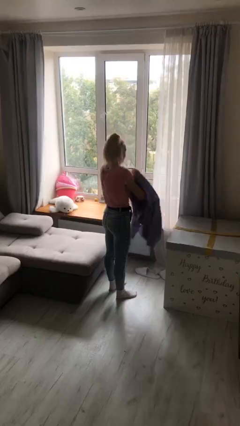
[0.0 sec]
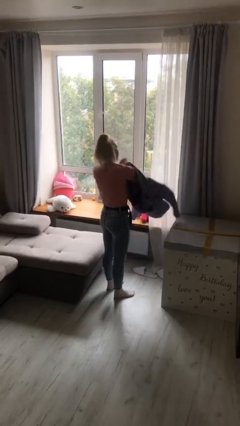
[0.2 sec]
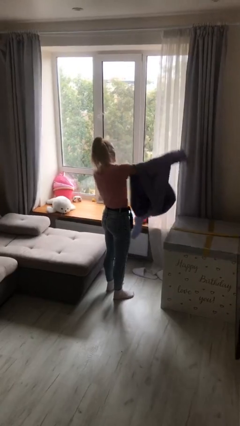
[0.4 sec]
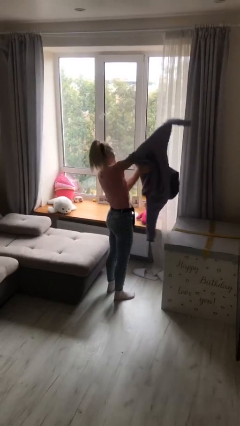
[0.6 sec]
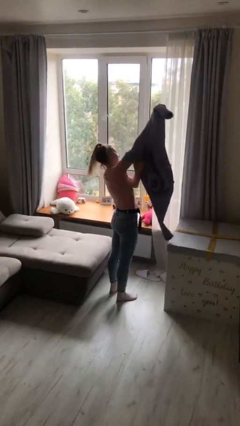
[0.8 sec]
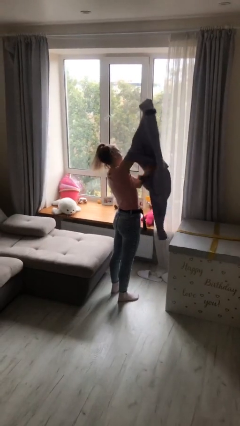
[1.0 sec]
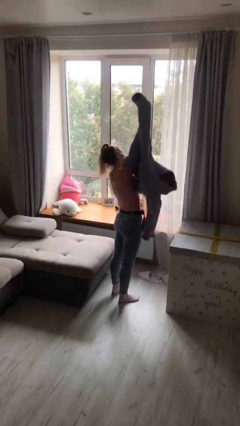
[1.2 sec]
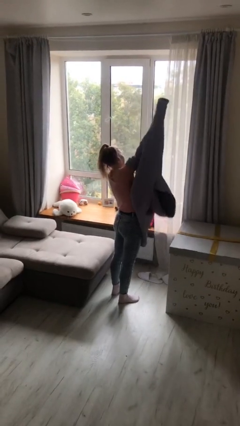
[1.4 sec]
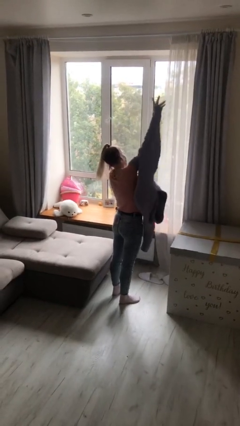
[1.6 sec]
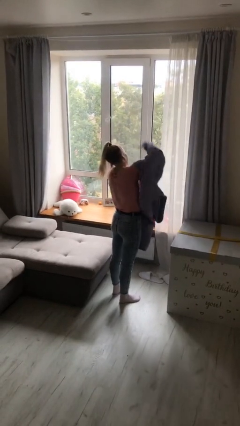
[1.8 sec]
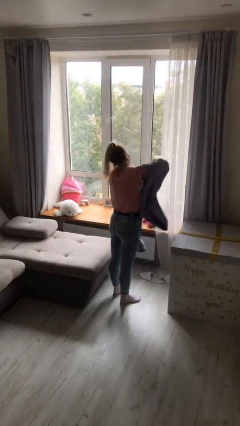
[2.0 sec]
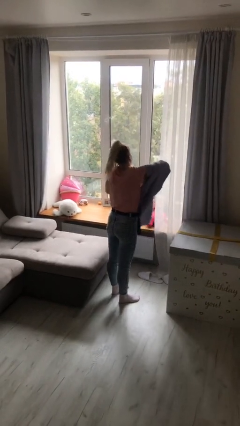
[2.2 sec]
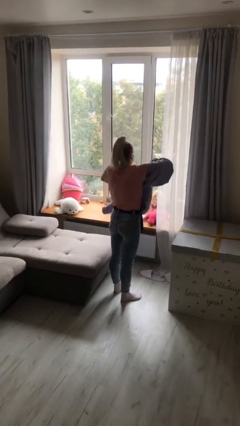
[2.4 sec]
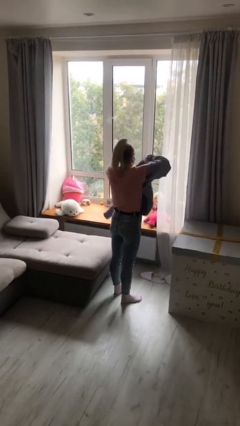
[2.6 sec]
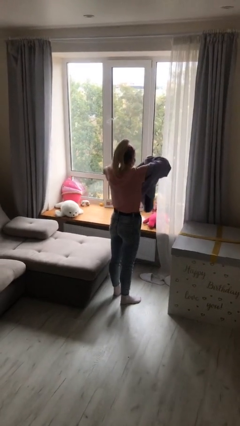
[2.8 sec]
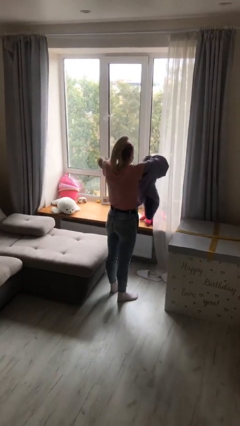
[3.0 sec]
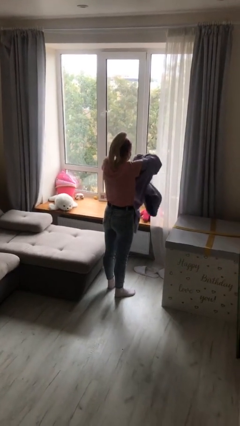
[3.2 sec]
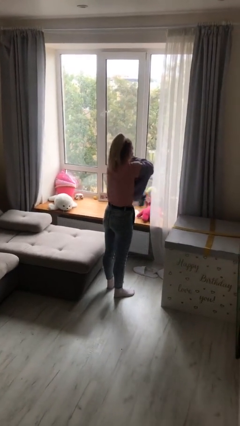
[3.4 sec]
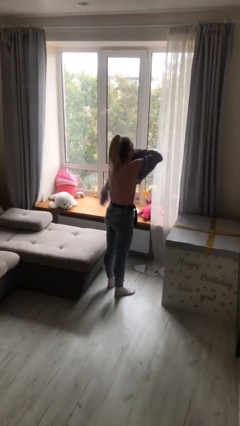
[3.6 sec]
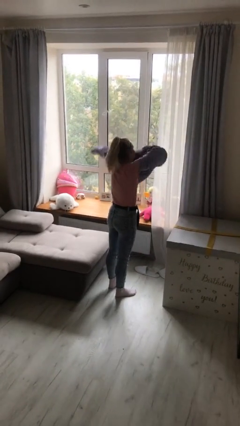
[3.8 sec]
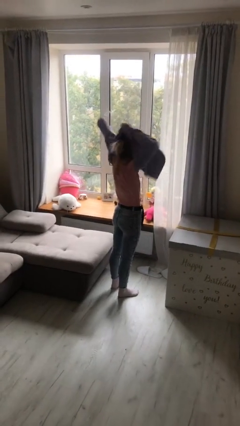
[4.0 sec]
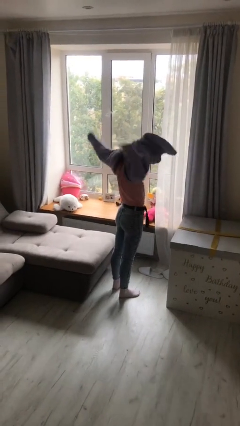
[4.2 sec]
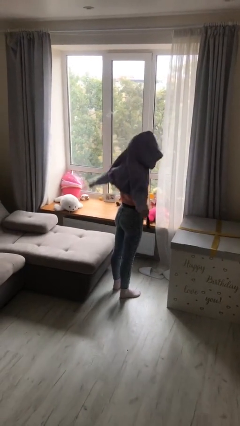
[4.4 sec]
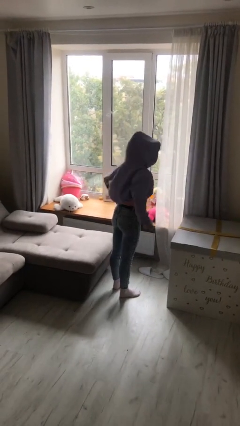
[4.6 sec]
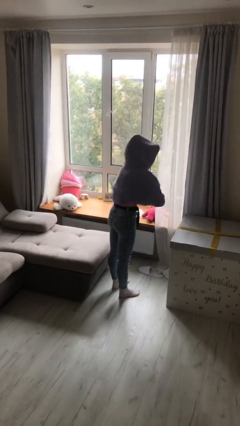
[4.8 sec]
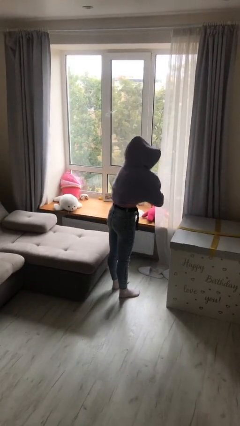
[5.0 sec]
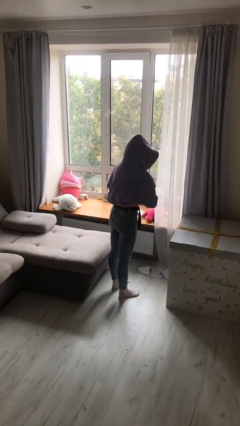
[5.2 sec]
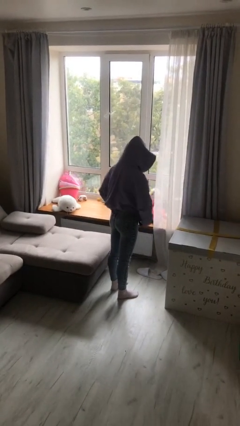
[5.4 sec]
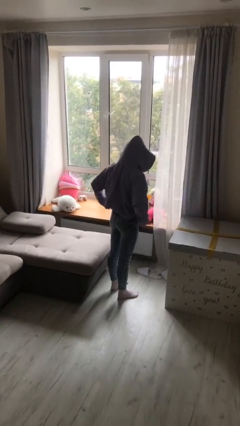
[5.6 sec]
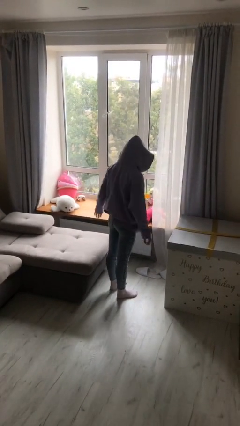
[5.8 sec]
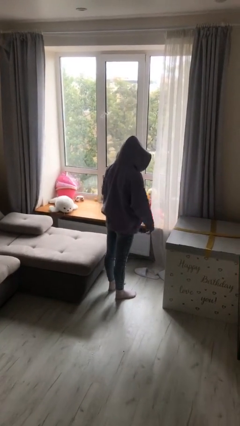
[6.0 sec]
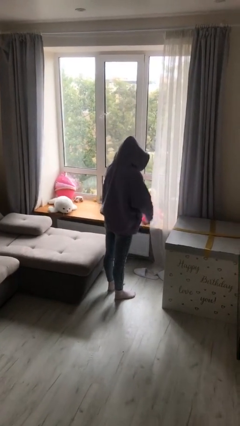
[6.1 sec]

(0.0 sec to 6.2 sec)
person puts on hoodie

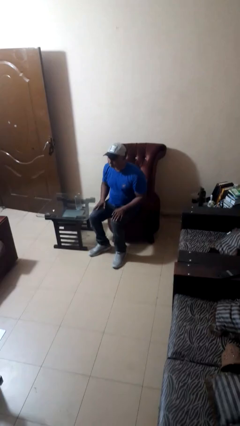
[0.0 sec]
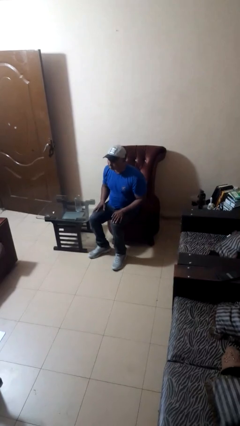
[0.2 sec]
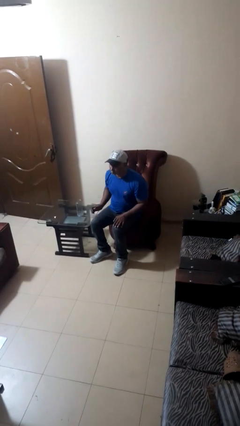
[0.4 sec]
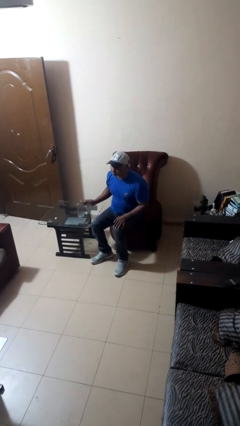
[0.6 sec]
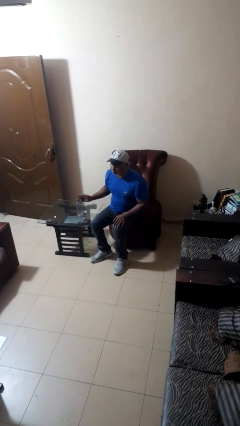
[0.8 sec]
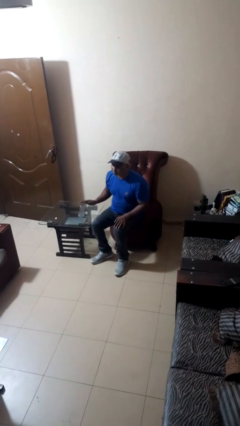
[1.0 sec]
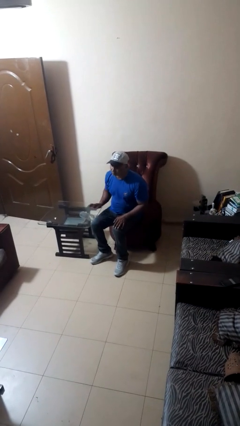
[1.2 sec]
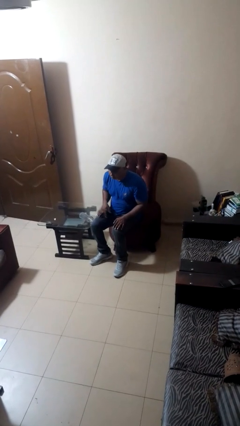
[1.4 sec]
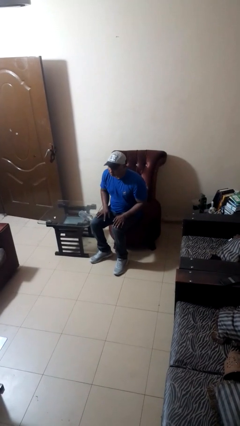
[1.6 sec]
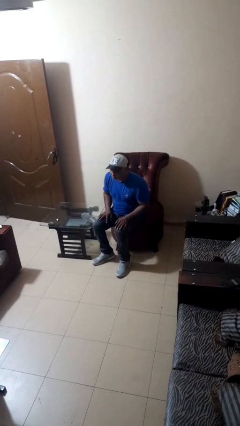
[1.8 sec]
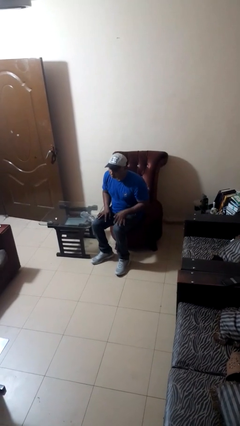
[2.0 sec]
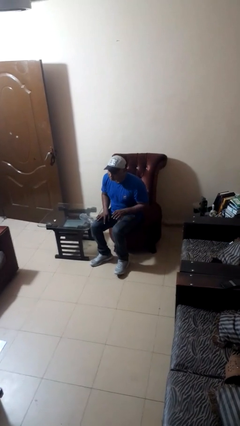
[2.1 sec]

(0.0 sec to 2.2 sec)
person knocks over glass

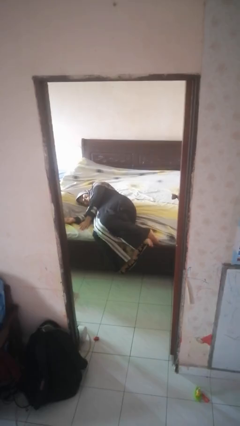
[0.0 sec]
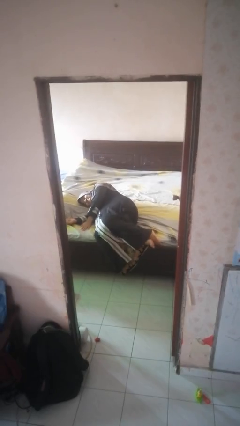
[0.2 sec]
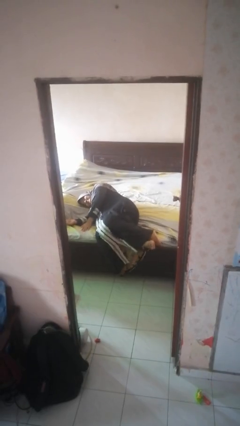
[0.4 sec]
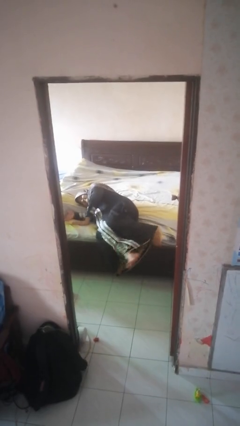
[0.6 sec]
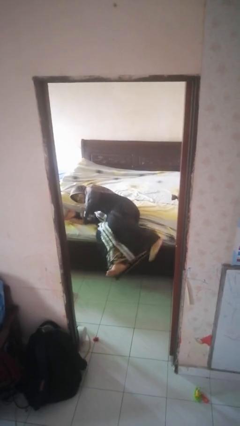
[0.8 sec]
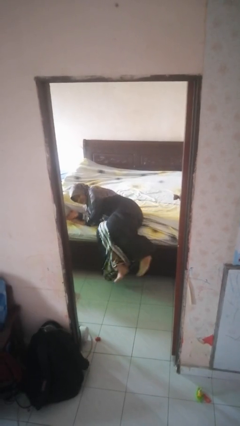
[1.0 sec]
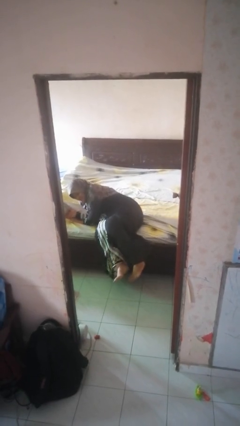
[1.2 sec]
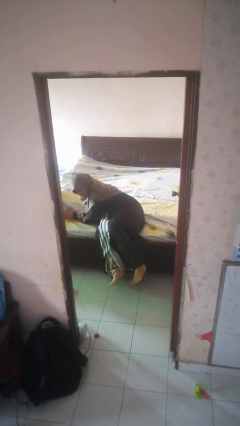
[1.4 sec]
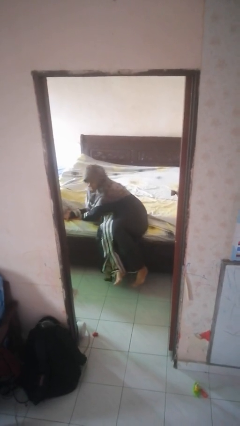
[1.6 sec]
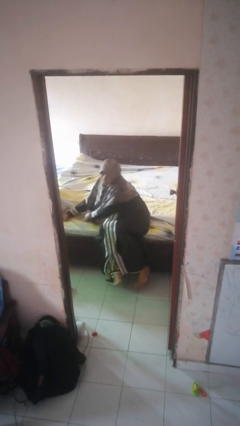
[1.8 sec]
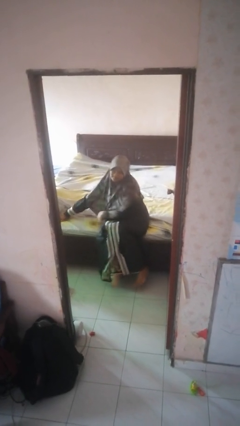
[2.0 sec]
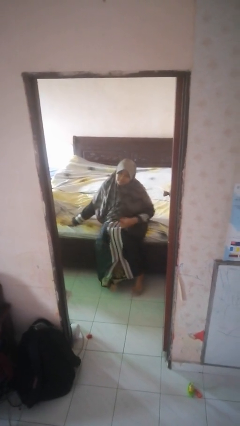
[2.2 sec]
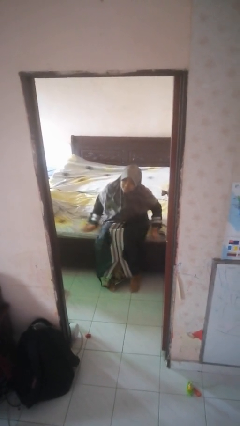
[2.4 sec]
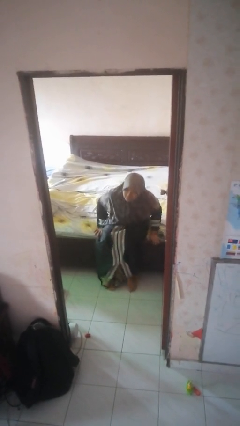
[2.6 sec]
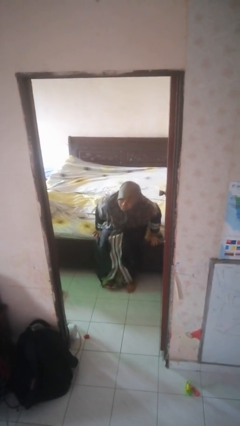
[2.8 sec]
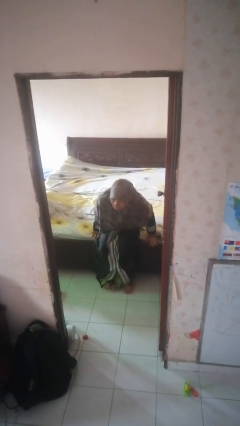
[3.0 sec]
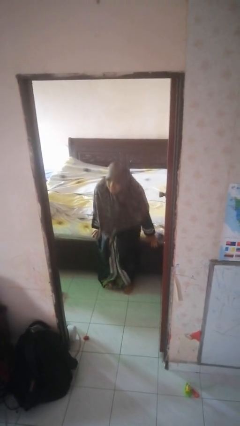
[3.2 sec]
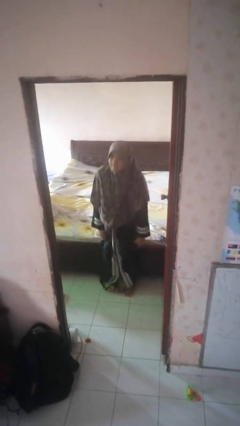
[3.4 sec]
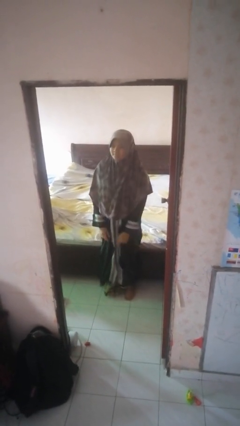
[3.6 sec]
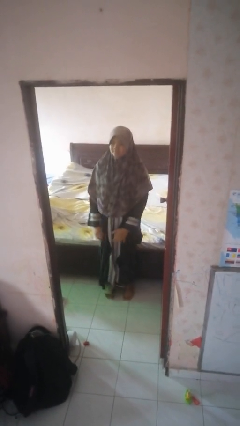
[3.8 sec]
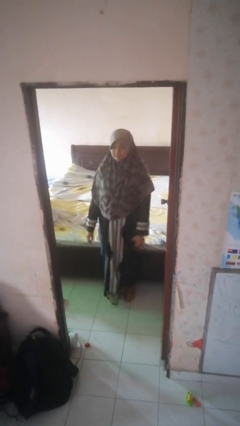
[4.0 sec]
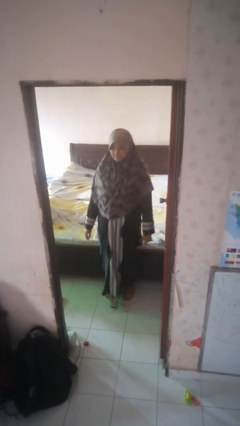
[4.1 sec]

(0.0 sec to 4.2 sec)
person stands up

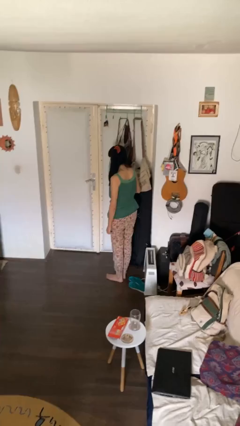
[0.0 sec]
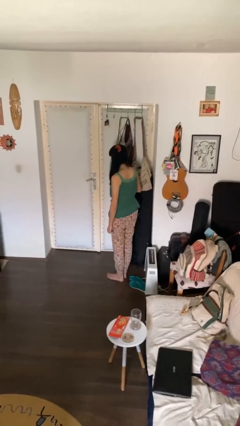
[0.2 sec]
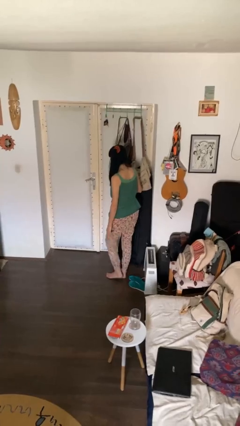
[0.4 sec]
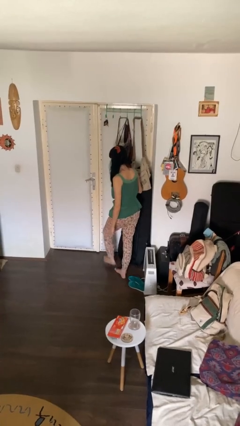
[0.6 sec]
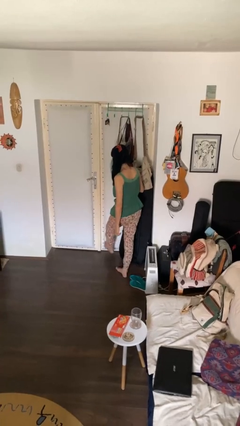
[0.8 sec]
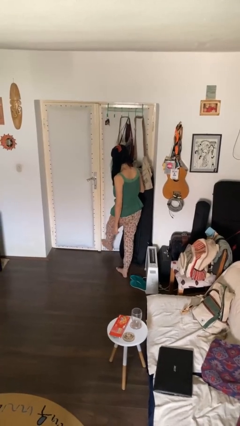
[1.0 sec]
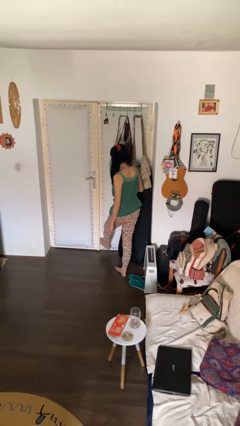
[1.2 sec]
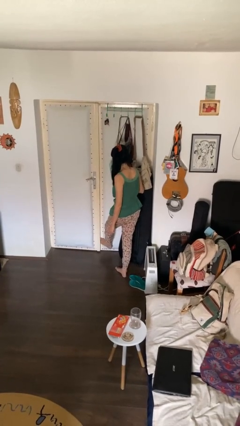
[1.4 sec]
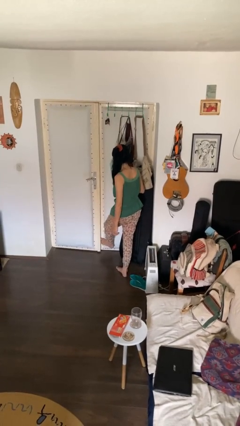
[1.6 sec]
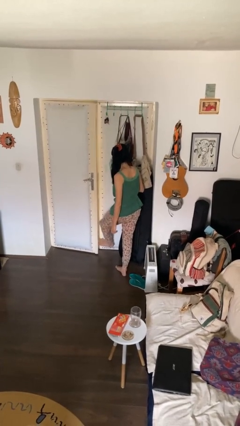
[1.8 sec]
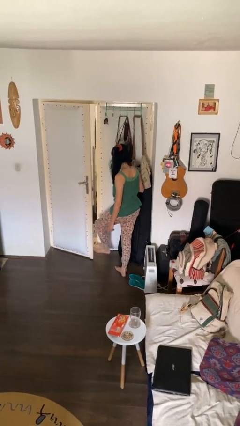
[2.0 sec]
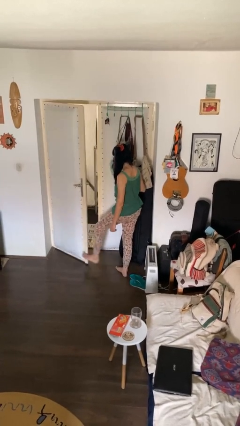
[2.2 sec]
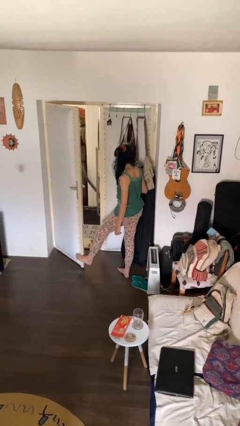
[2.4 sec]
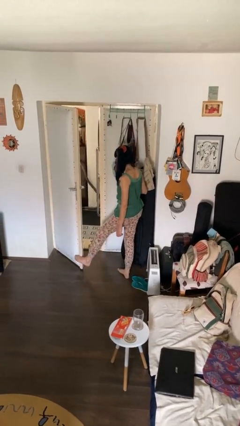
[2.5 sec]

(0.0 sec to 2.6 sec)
person opens facility door

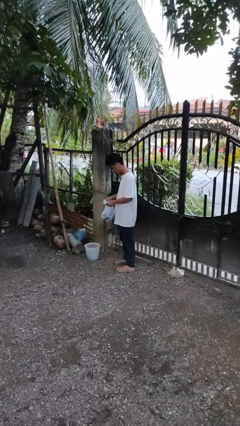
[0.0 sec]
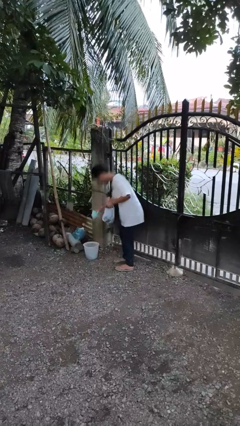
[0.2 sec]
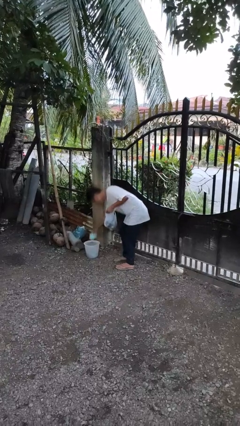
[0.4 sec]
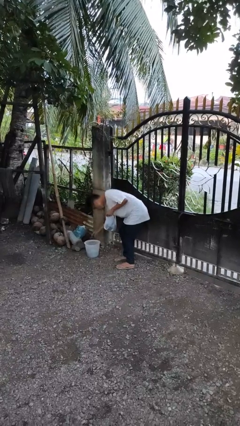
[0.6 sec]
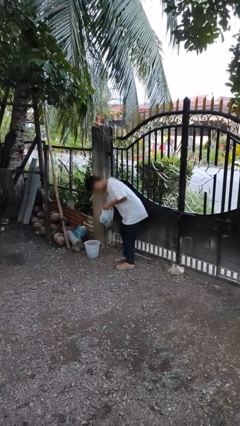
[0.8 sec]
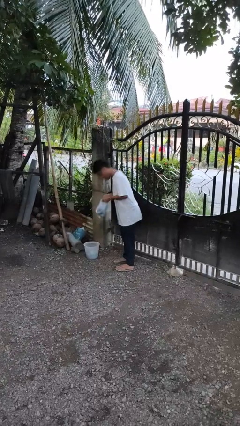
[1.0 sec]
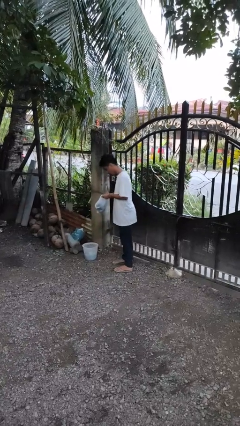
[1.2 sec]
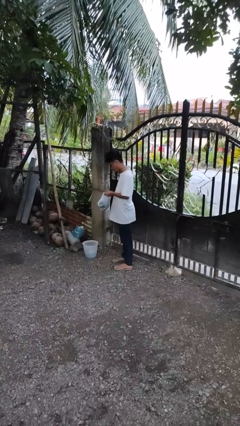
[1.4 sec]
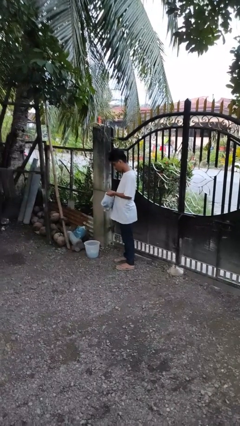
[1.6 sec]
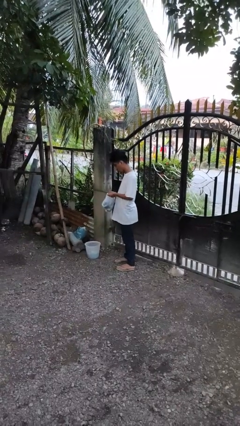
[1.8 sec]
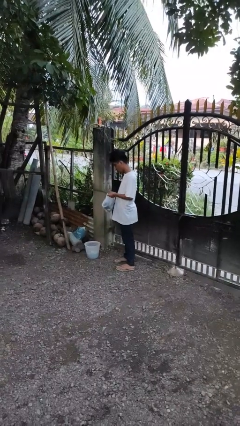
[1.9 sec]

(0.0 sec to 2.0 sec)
person discards trash

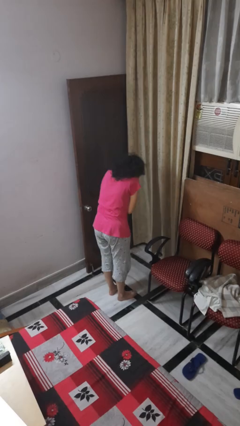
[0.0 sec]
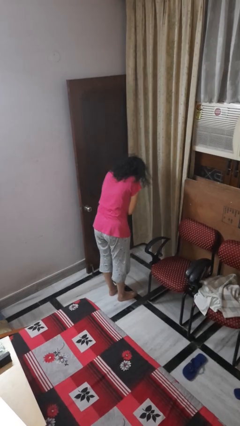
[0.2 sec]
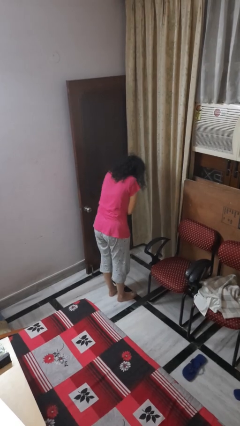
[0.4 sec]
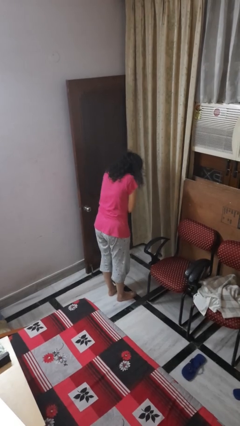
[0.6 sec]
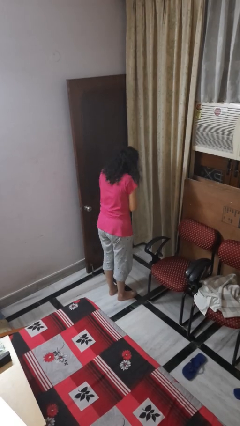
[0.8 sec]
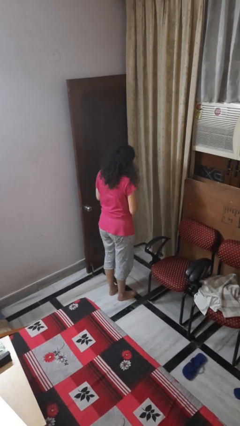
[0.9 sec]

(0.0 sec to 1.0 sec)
person sneezes into hand
